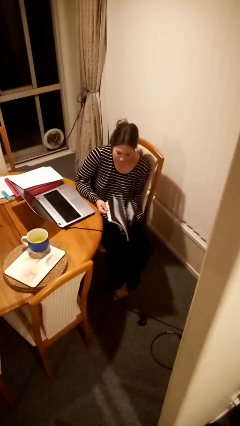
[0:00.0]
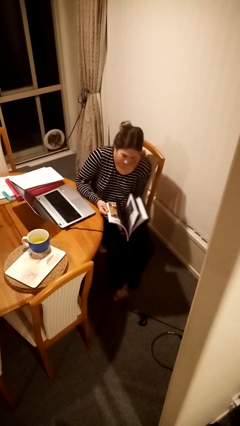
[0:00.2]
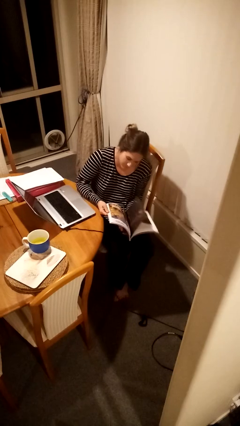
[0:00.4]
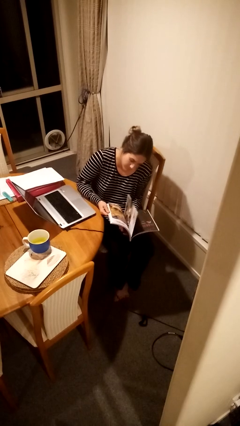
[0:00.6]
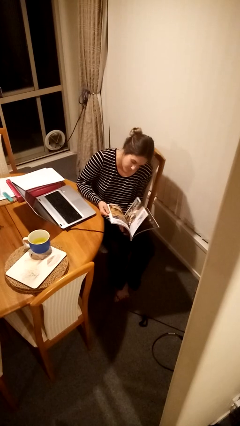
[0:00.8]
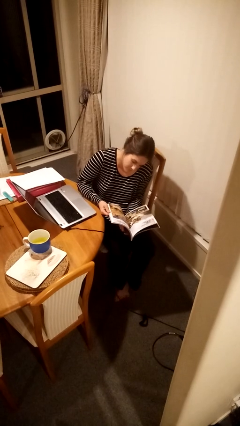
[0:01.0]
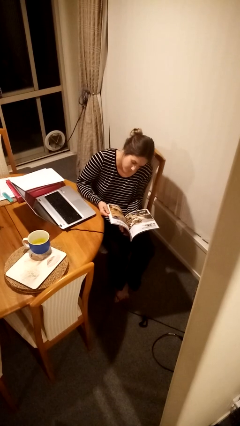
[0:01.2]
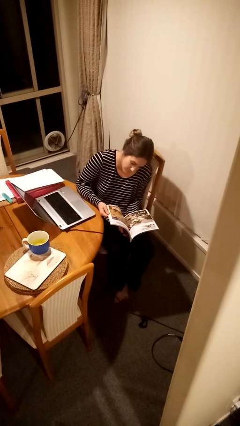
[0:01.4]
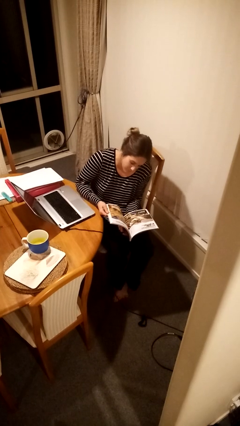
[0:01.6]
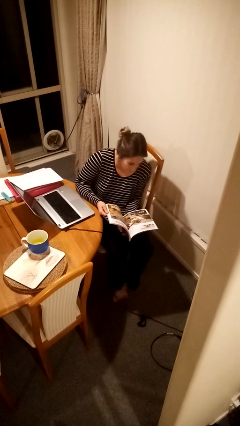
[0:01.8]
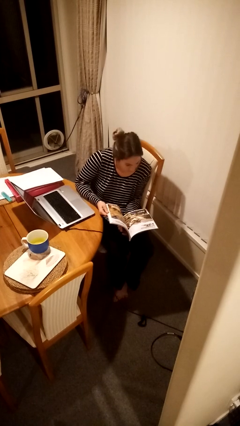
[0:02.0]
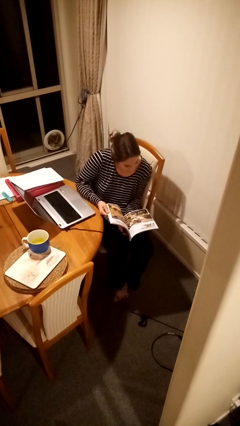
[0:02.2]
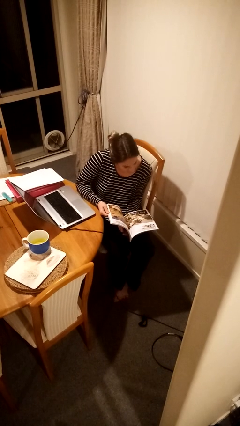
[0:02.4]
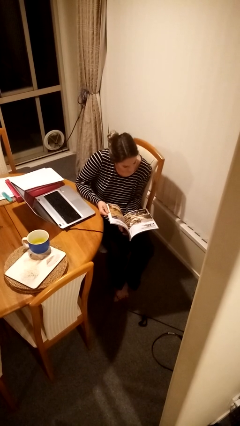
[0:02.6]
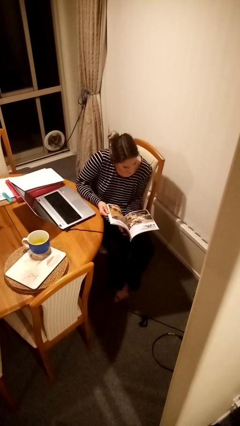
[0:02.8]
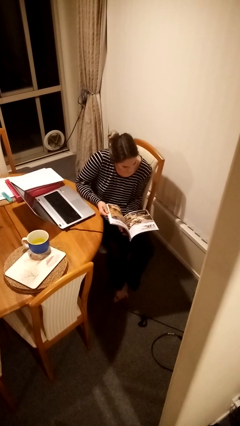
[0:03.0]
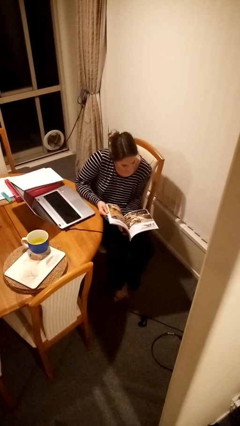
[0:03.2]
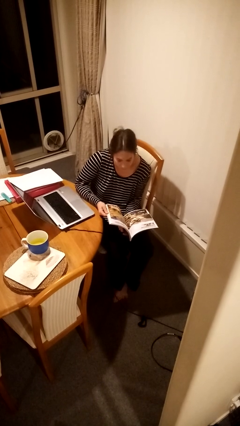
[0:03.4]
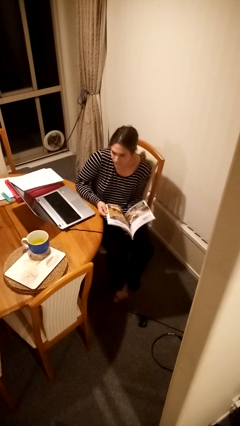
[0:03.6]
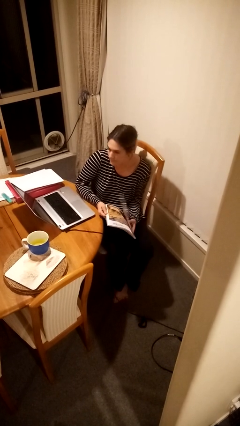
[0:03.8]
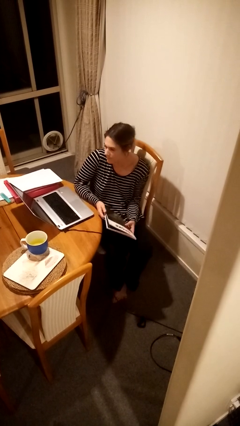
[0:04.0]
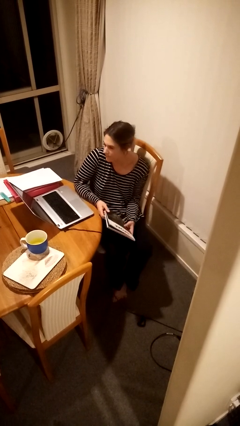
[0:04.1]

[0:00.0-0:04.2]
person reads magazine

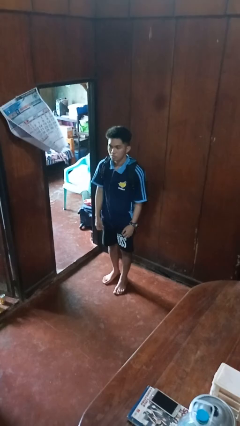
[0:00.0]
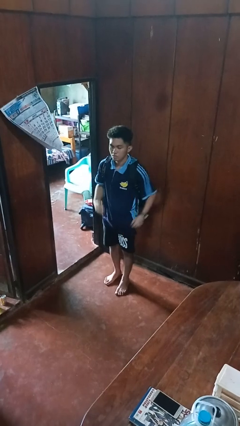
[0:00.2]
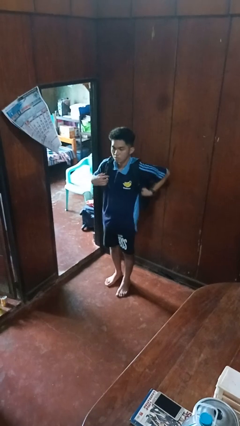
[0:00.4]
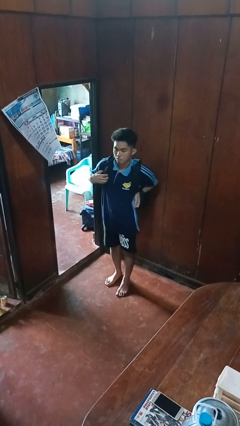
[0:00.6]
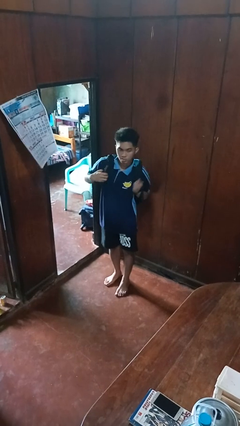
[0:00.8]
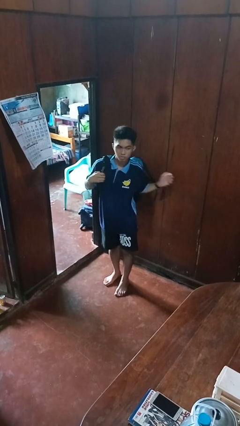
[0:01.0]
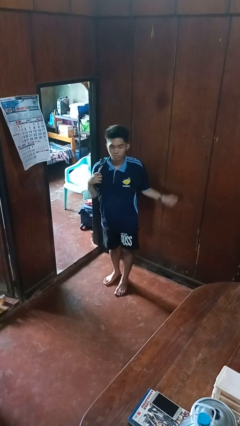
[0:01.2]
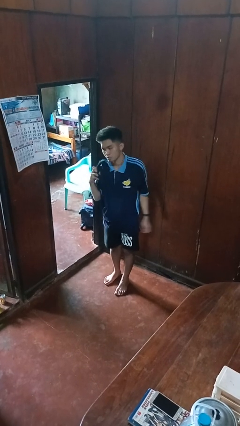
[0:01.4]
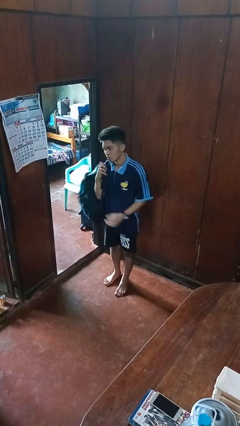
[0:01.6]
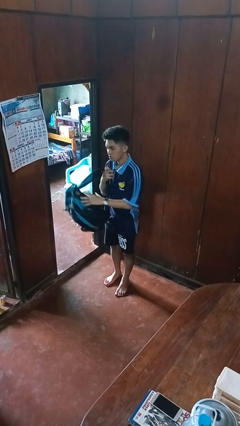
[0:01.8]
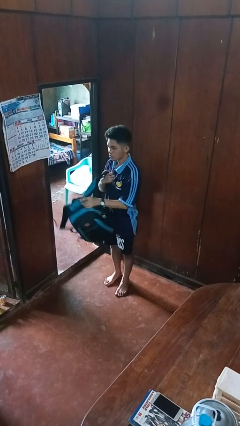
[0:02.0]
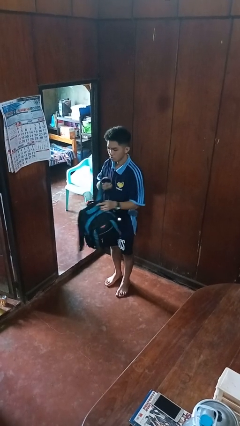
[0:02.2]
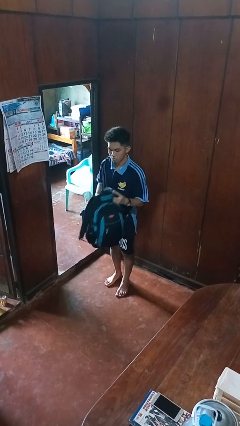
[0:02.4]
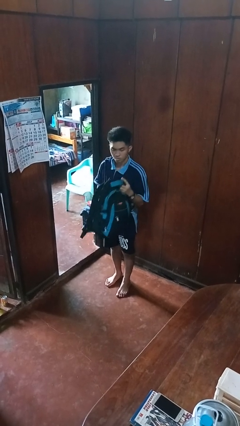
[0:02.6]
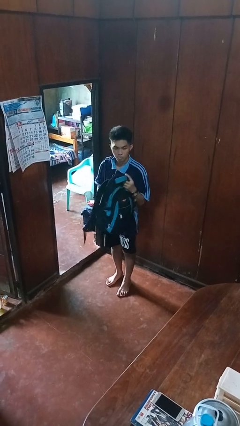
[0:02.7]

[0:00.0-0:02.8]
person takes off backpack

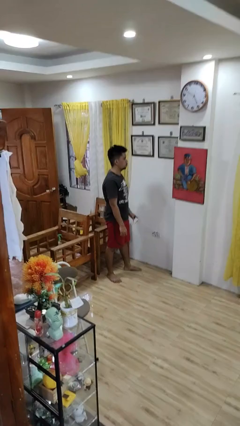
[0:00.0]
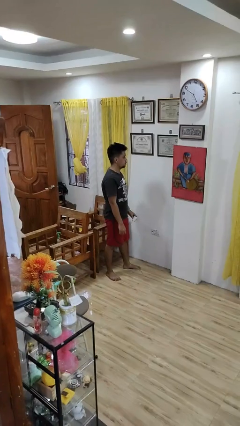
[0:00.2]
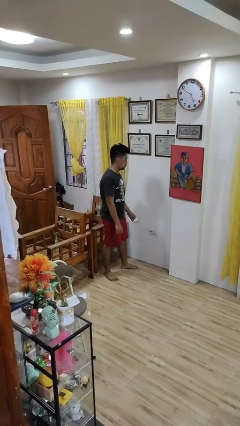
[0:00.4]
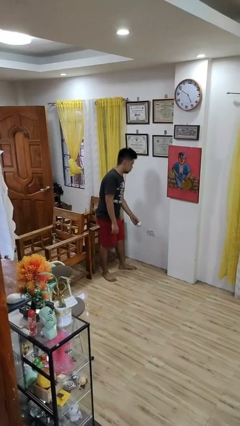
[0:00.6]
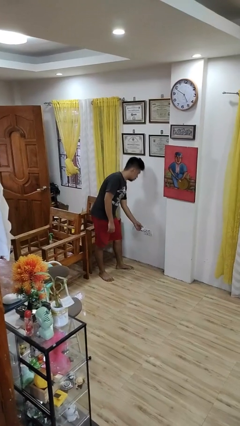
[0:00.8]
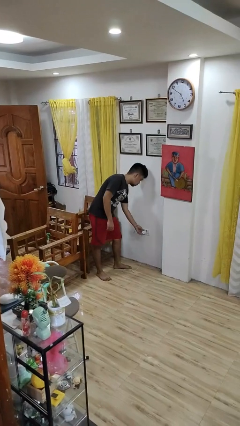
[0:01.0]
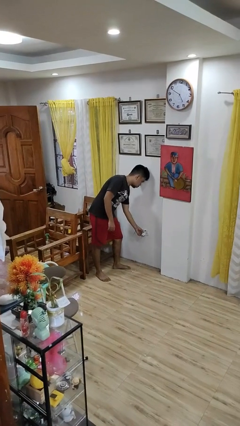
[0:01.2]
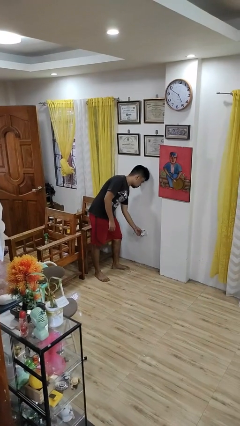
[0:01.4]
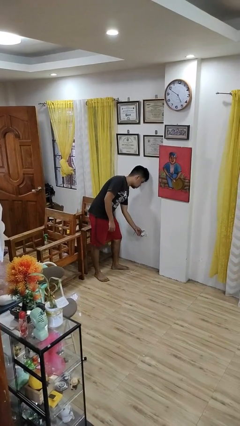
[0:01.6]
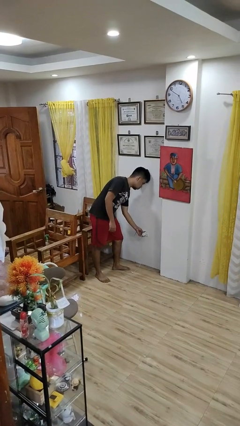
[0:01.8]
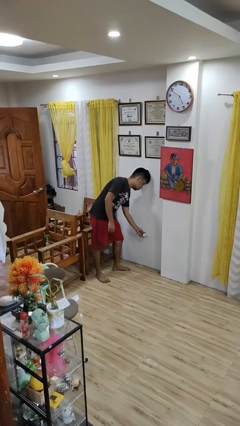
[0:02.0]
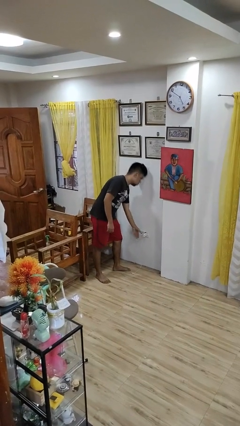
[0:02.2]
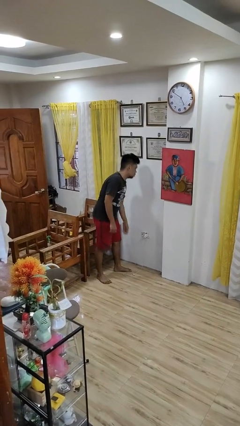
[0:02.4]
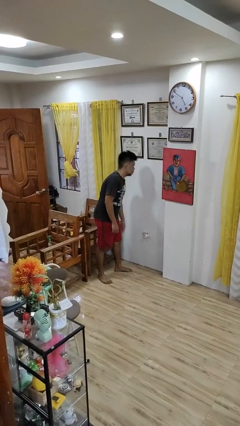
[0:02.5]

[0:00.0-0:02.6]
person plugs into electrical socket

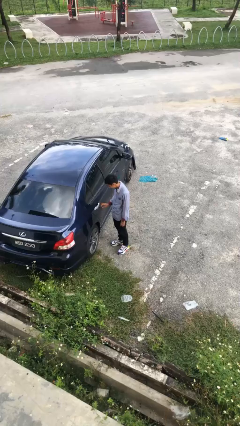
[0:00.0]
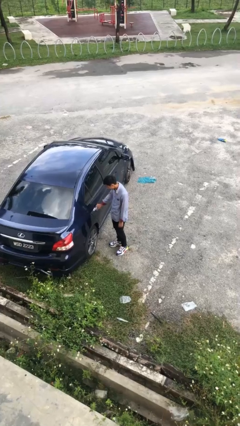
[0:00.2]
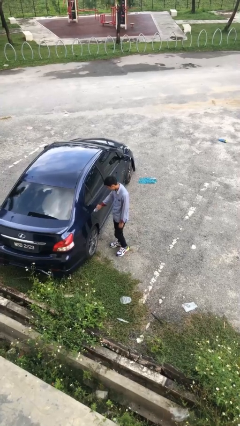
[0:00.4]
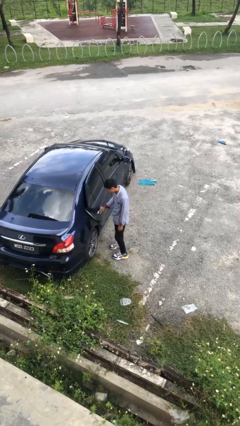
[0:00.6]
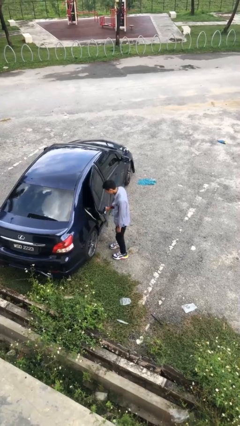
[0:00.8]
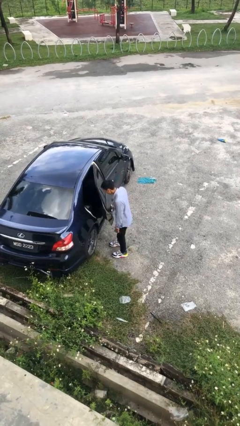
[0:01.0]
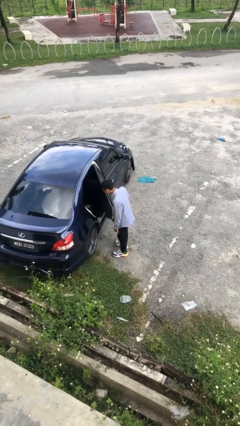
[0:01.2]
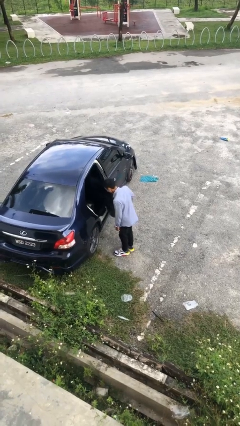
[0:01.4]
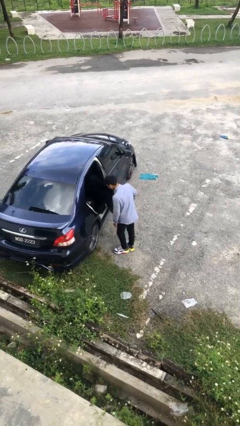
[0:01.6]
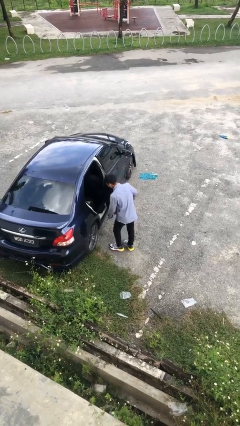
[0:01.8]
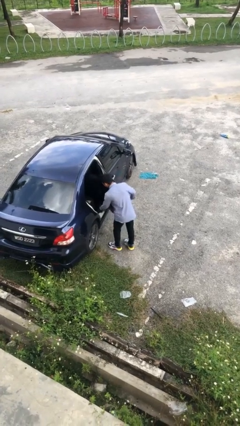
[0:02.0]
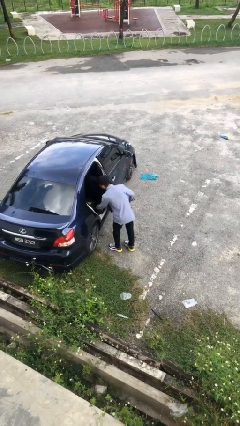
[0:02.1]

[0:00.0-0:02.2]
person opens car door

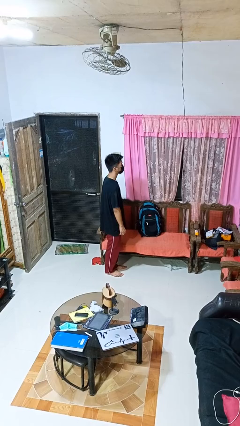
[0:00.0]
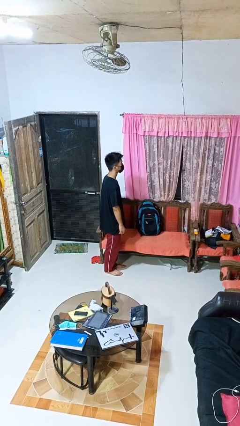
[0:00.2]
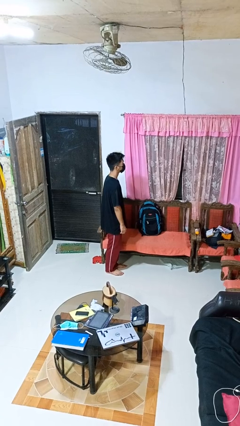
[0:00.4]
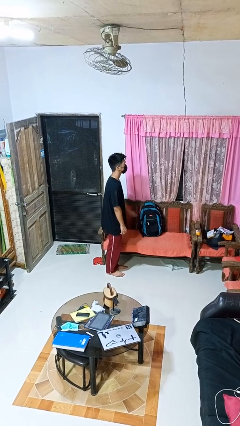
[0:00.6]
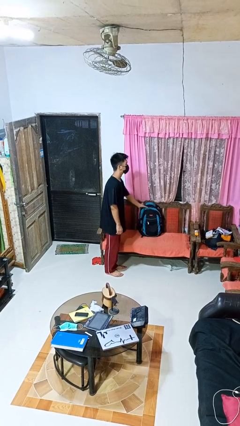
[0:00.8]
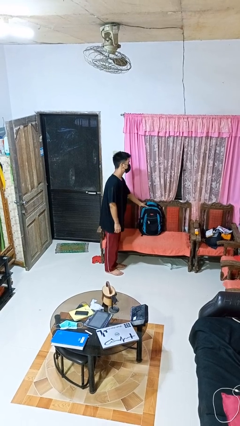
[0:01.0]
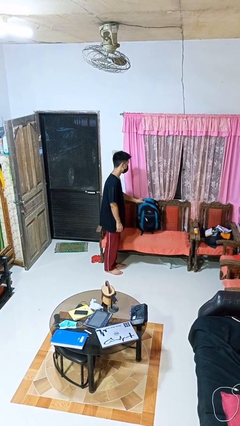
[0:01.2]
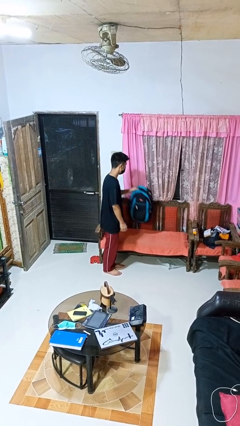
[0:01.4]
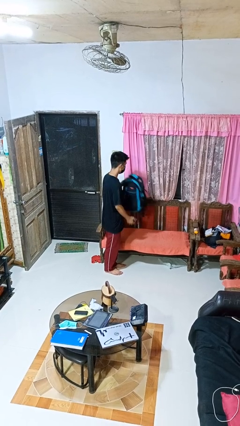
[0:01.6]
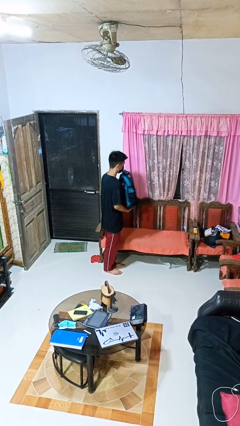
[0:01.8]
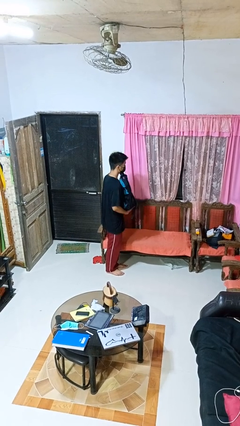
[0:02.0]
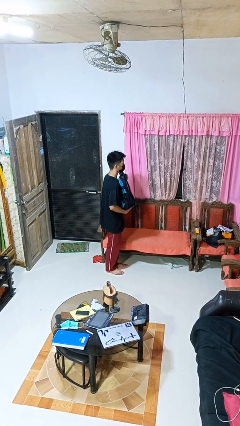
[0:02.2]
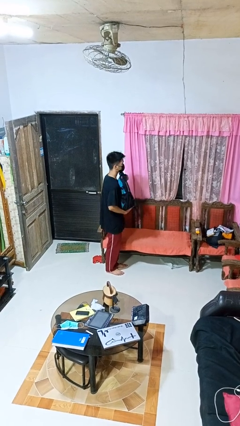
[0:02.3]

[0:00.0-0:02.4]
person picks up object from couch

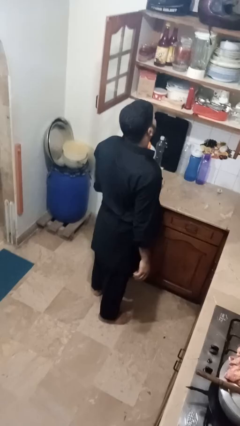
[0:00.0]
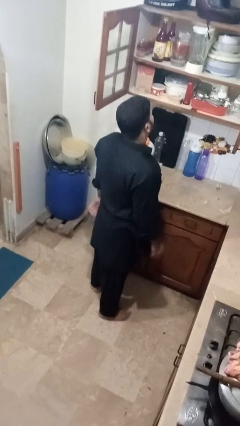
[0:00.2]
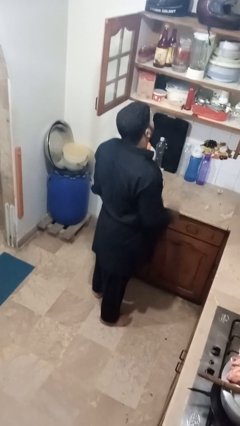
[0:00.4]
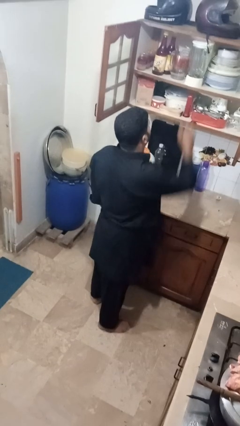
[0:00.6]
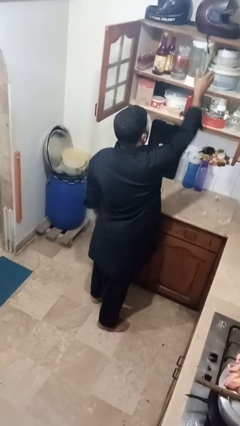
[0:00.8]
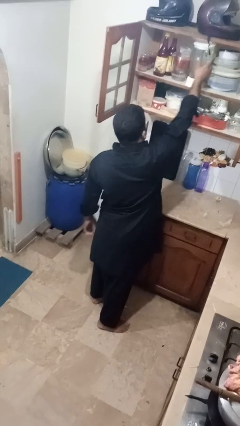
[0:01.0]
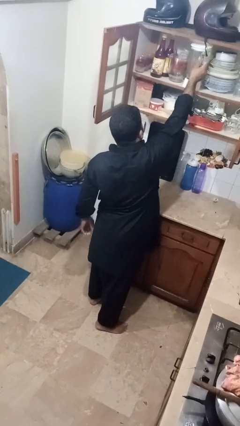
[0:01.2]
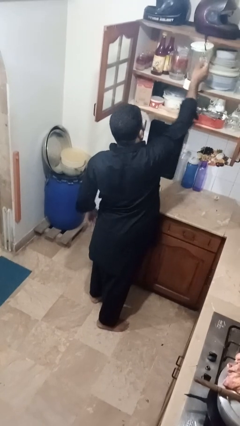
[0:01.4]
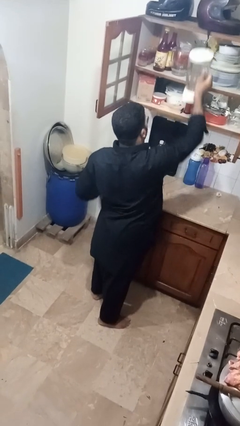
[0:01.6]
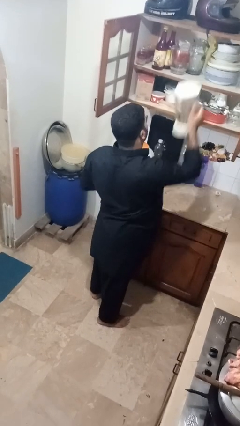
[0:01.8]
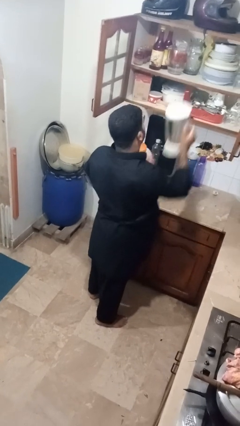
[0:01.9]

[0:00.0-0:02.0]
person picks up object from cabinet

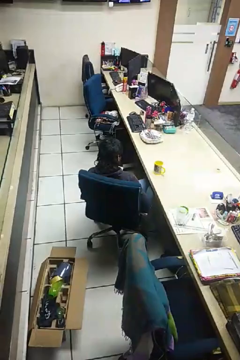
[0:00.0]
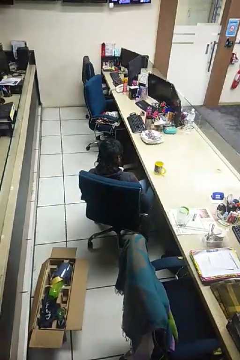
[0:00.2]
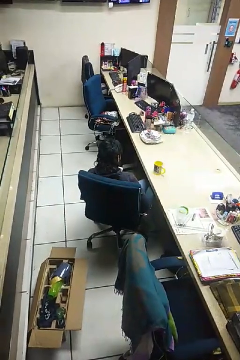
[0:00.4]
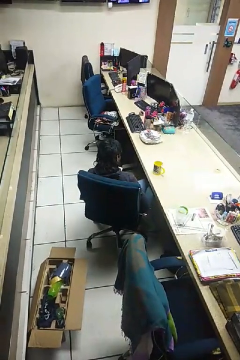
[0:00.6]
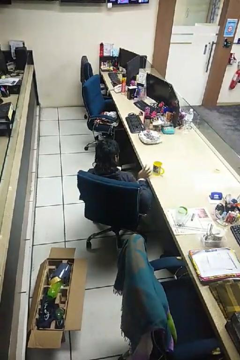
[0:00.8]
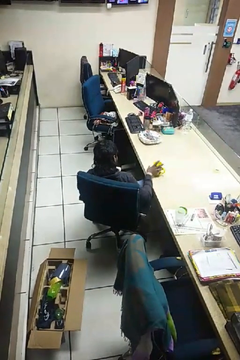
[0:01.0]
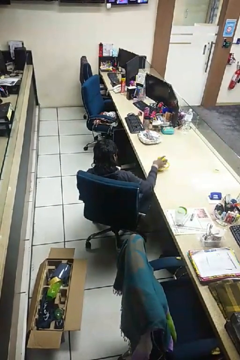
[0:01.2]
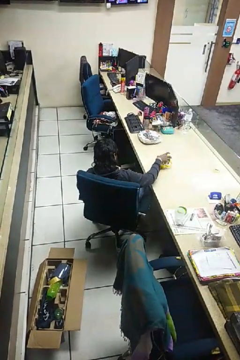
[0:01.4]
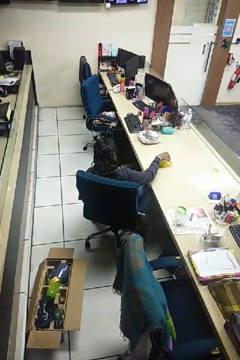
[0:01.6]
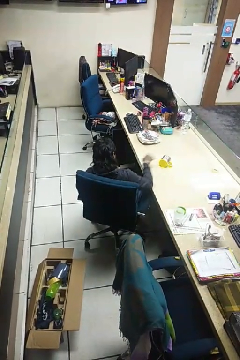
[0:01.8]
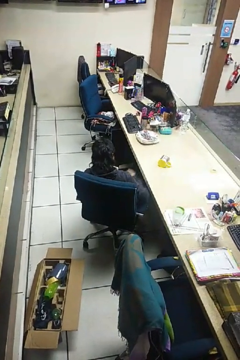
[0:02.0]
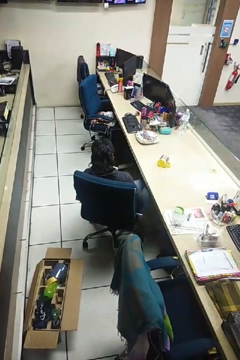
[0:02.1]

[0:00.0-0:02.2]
person knocks over glass
